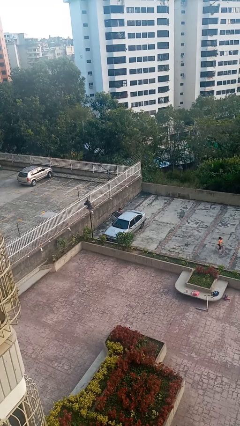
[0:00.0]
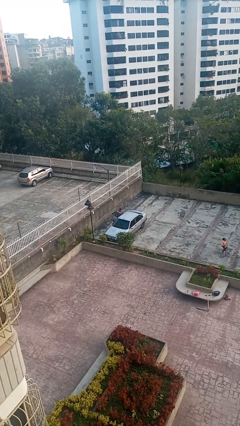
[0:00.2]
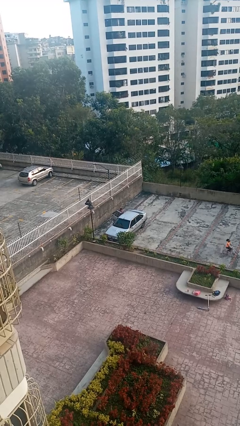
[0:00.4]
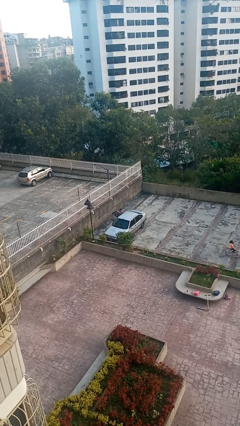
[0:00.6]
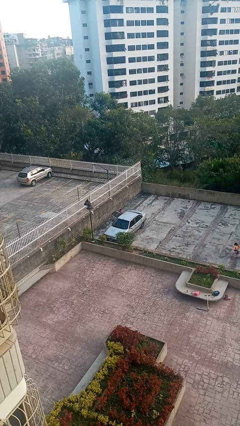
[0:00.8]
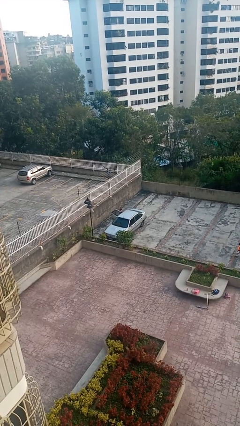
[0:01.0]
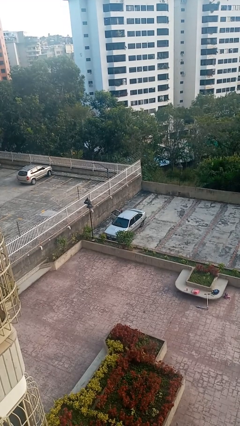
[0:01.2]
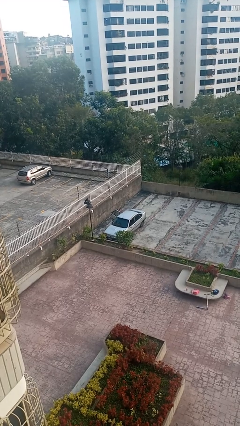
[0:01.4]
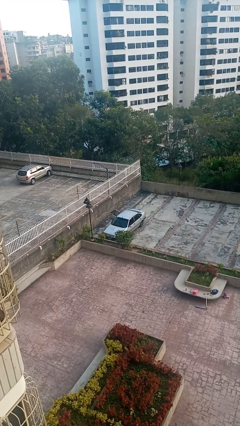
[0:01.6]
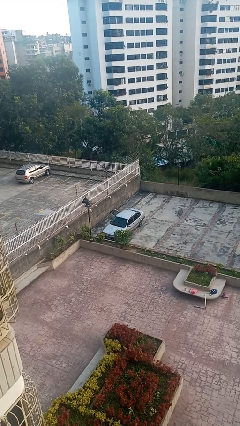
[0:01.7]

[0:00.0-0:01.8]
person enters car

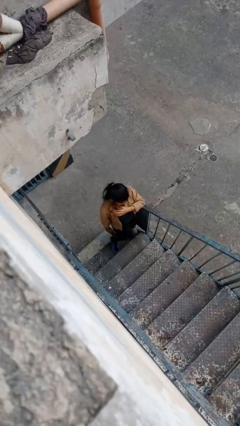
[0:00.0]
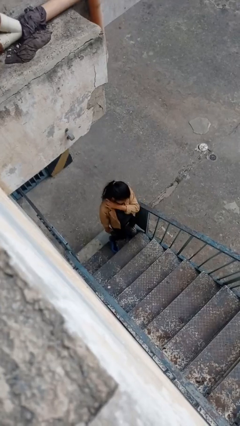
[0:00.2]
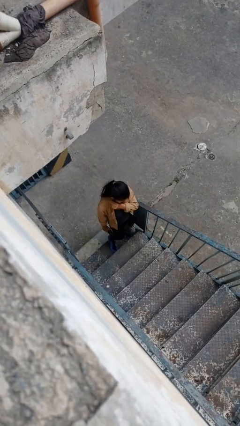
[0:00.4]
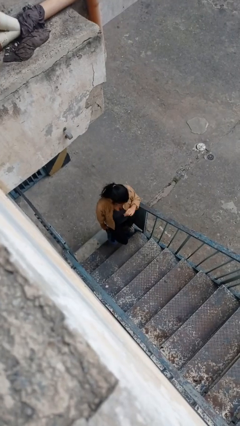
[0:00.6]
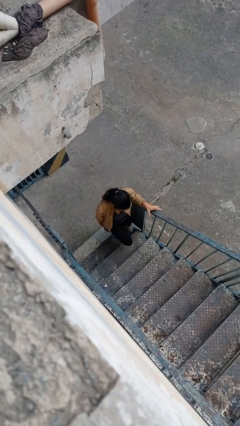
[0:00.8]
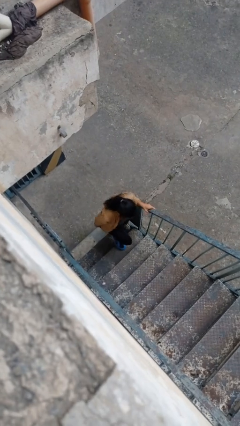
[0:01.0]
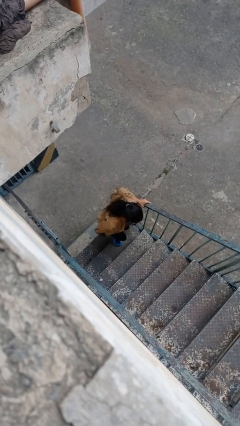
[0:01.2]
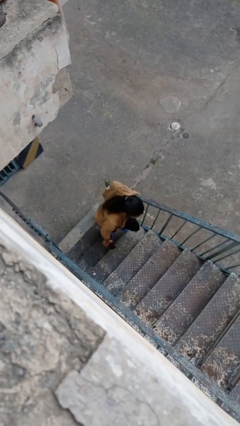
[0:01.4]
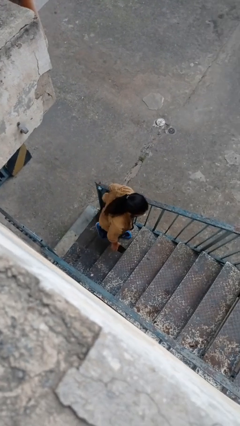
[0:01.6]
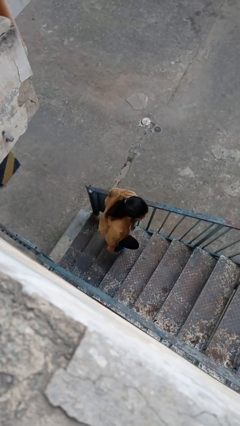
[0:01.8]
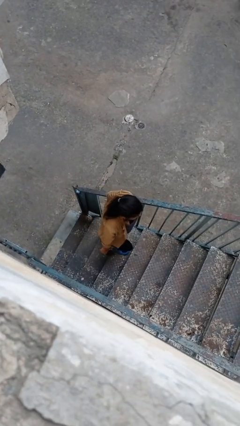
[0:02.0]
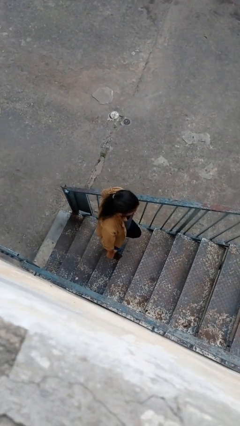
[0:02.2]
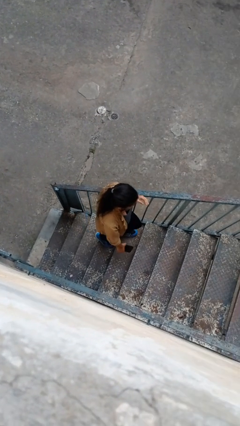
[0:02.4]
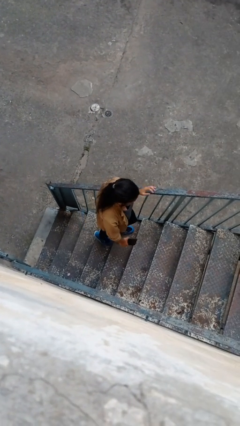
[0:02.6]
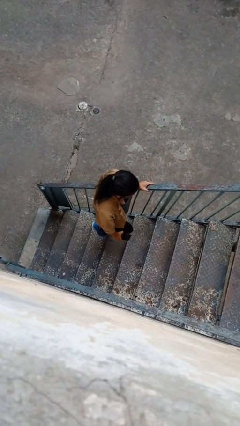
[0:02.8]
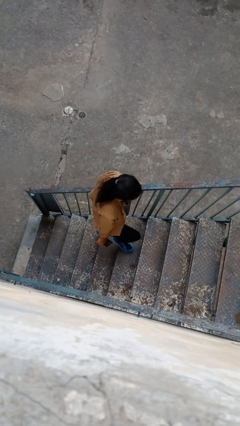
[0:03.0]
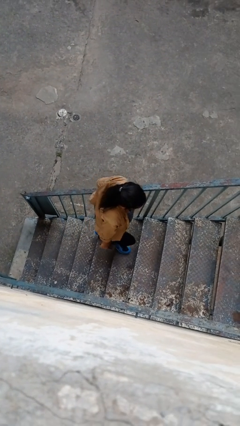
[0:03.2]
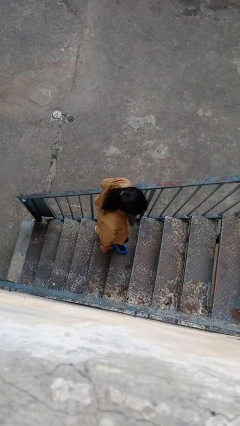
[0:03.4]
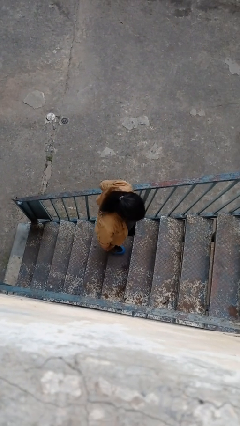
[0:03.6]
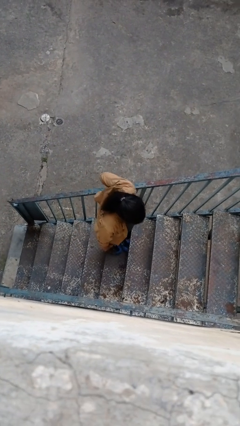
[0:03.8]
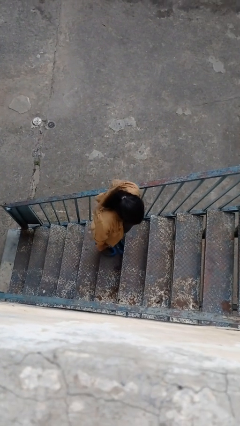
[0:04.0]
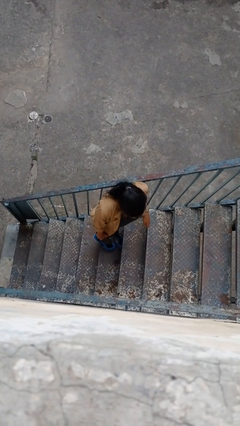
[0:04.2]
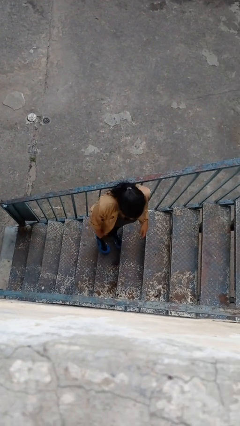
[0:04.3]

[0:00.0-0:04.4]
person climbs up stairs

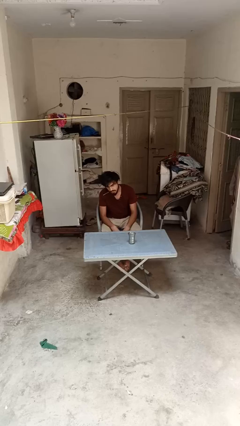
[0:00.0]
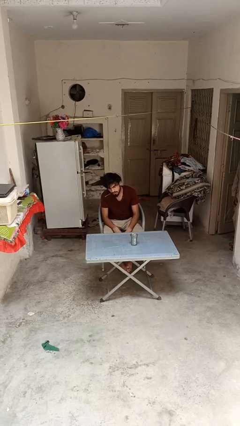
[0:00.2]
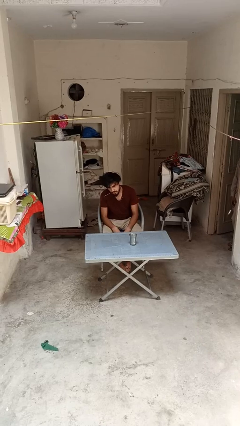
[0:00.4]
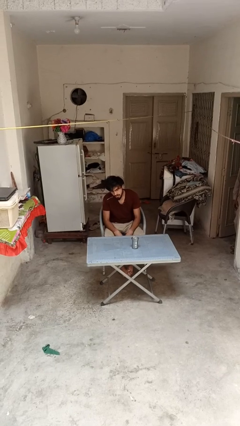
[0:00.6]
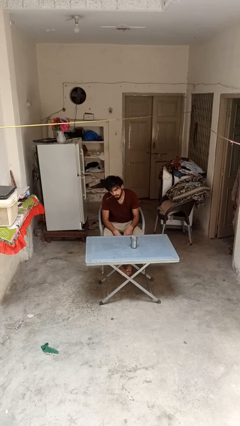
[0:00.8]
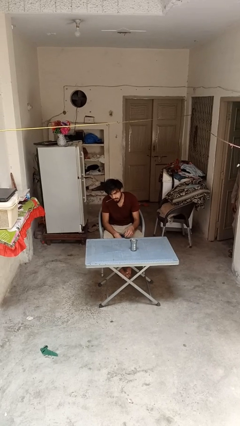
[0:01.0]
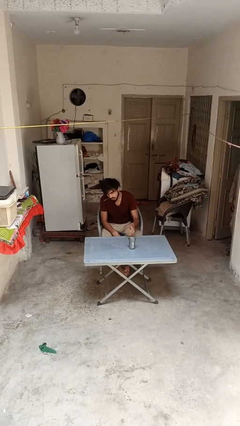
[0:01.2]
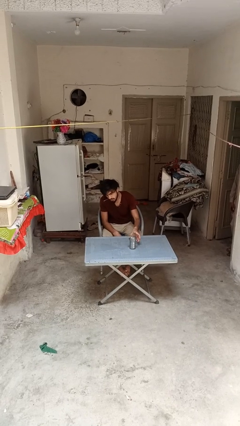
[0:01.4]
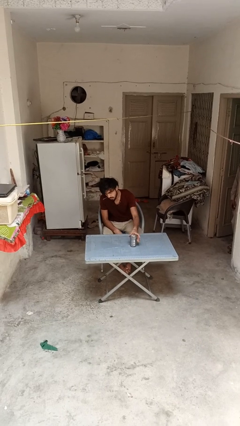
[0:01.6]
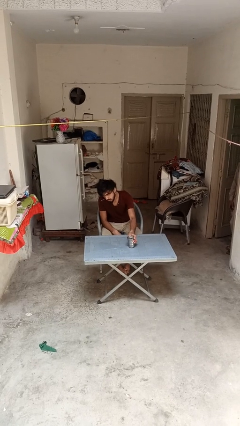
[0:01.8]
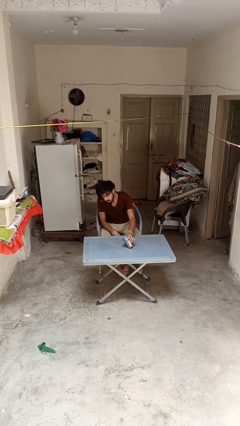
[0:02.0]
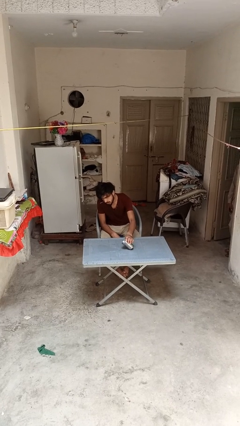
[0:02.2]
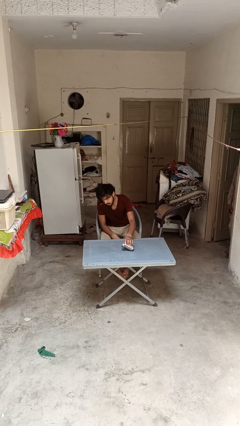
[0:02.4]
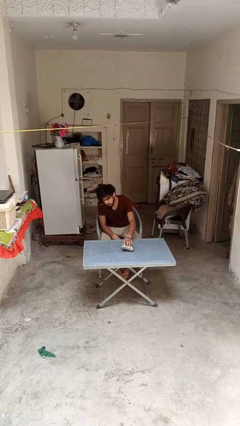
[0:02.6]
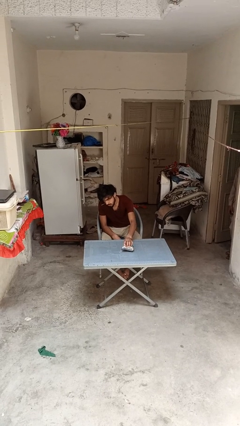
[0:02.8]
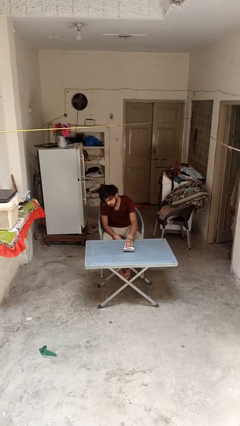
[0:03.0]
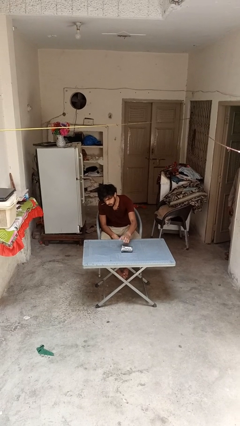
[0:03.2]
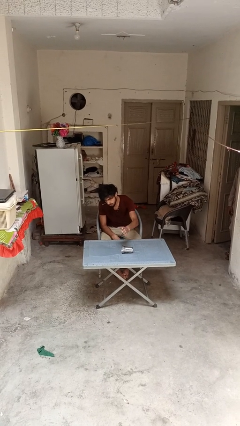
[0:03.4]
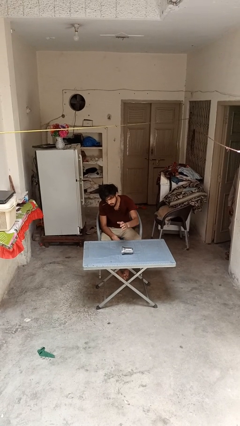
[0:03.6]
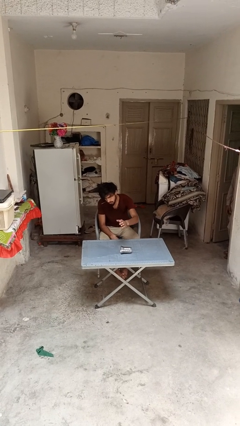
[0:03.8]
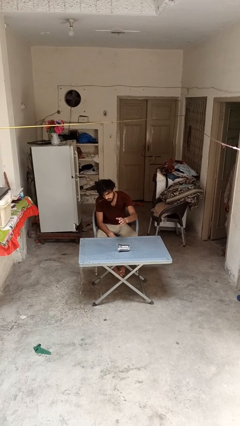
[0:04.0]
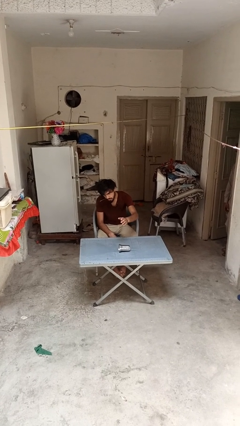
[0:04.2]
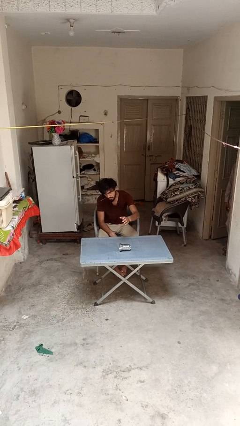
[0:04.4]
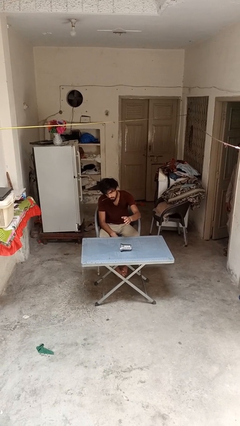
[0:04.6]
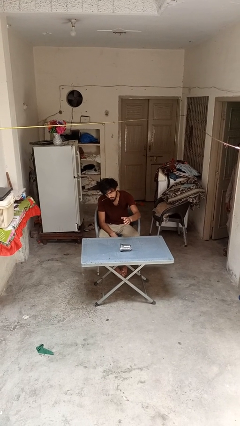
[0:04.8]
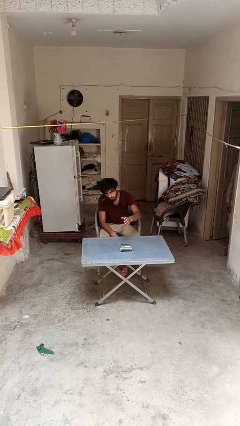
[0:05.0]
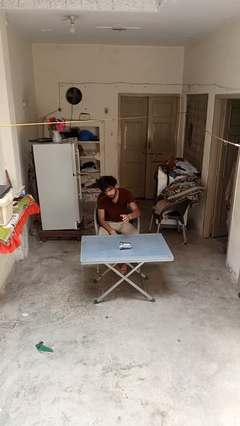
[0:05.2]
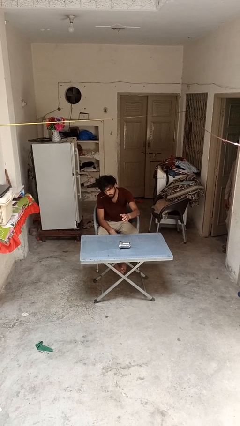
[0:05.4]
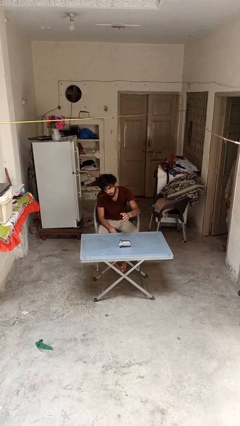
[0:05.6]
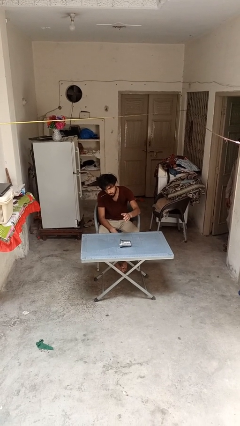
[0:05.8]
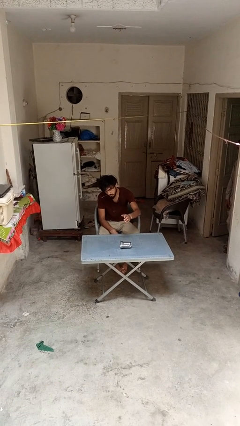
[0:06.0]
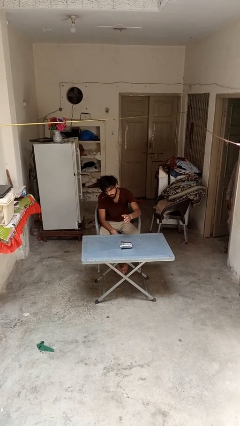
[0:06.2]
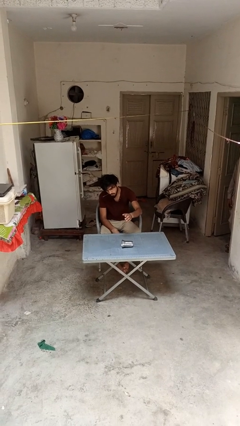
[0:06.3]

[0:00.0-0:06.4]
person spills on table

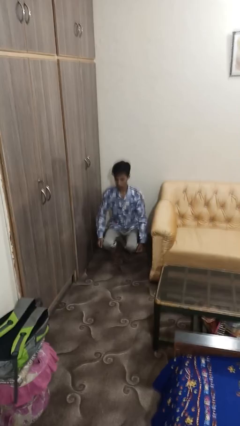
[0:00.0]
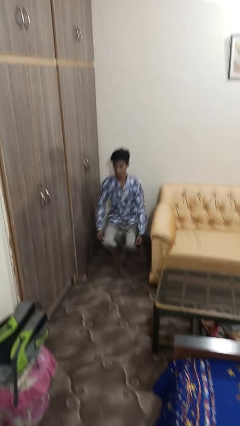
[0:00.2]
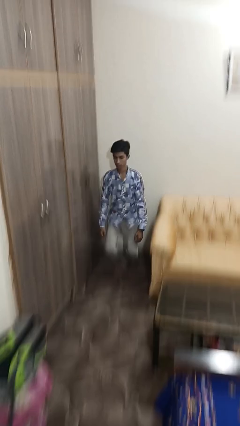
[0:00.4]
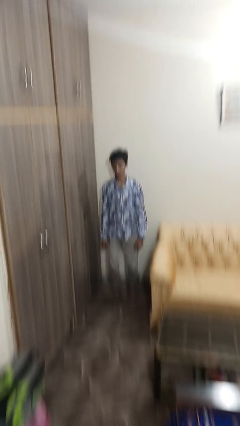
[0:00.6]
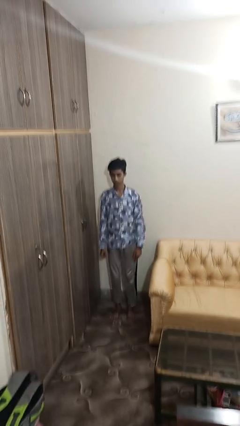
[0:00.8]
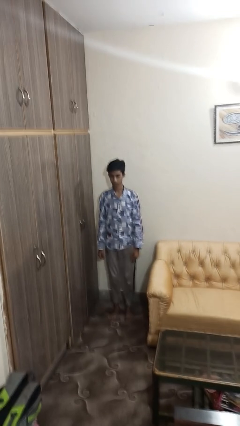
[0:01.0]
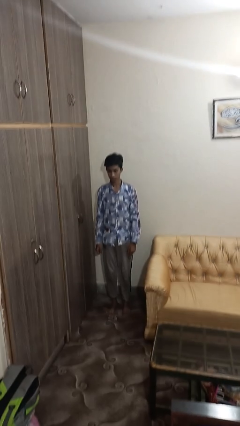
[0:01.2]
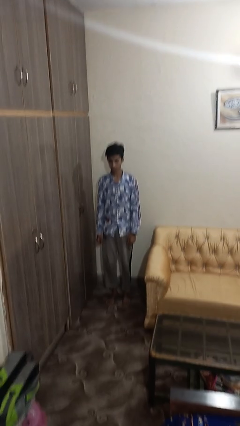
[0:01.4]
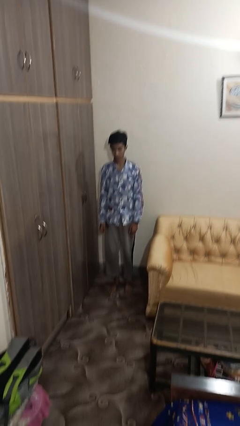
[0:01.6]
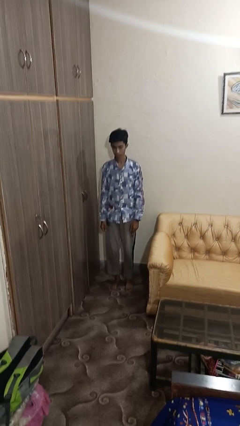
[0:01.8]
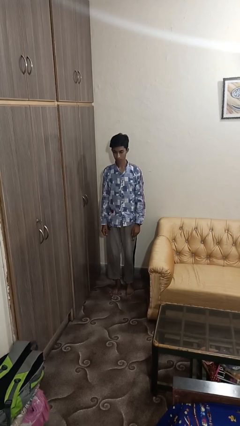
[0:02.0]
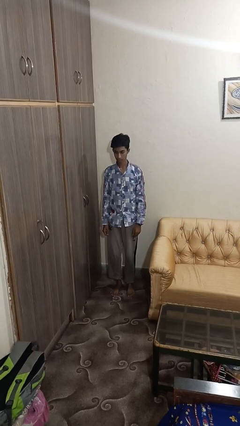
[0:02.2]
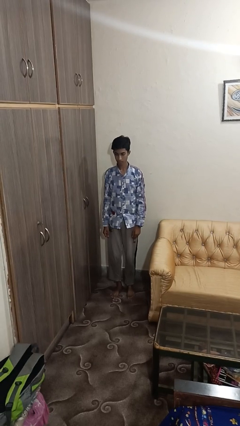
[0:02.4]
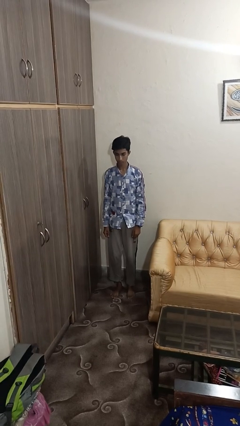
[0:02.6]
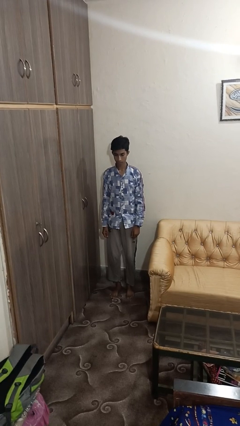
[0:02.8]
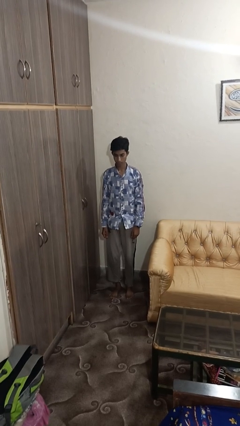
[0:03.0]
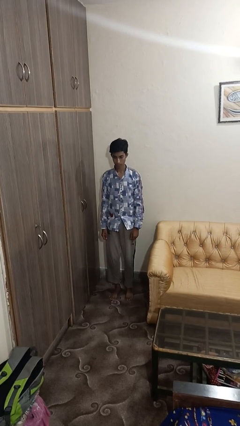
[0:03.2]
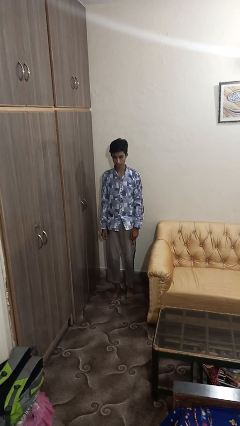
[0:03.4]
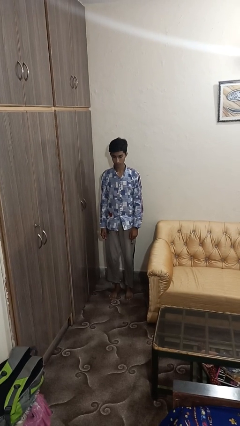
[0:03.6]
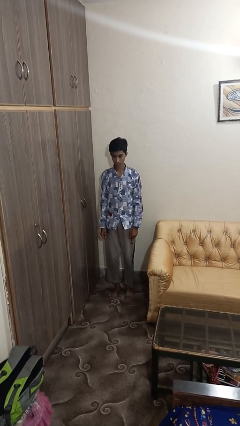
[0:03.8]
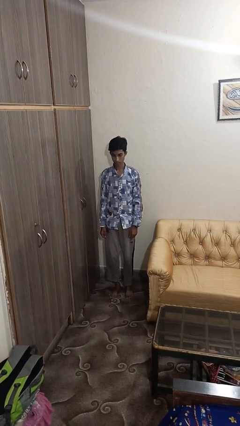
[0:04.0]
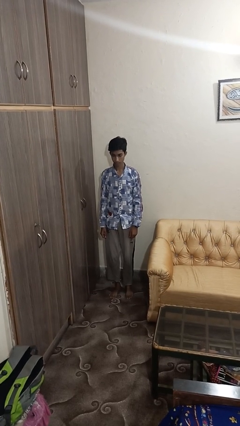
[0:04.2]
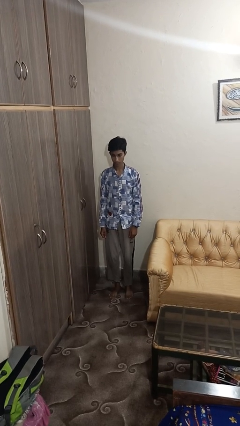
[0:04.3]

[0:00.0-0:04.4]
person stands up

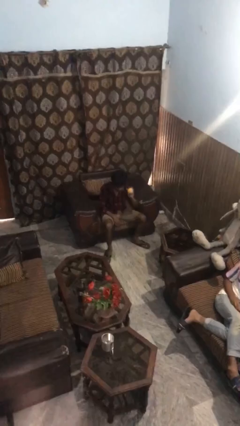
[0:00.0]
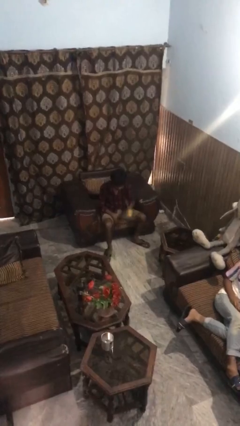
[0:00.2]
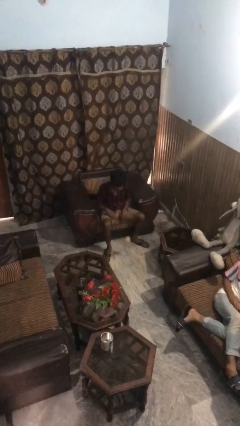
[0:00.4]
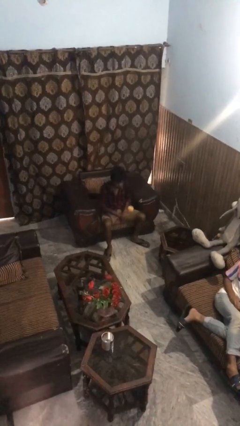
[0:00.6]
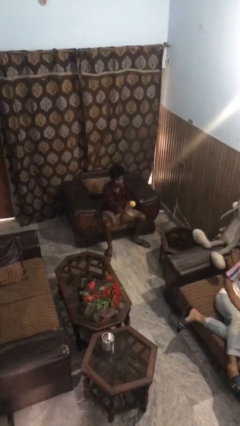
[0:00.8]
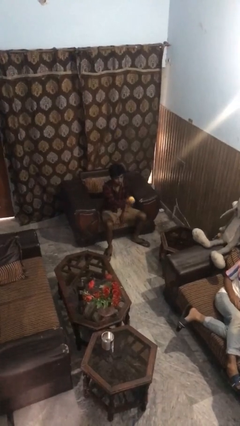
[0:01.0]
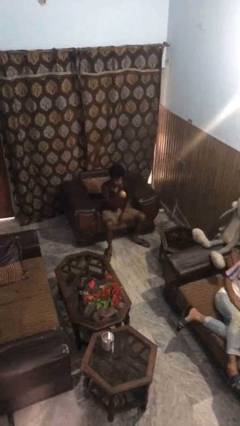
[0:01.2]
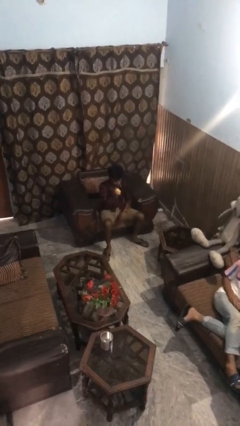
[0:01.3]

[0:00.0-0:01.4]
person bounces ball on floor
